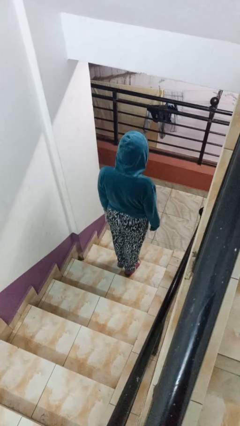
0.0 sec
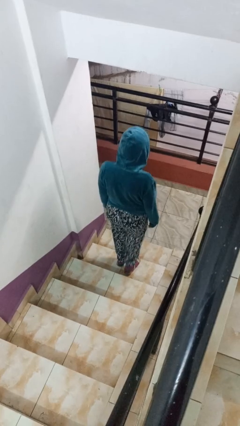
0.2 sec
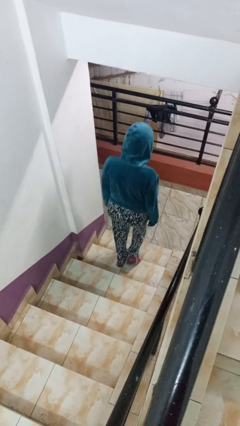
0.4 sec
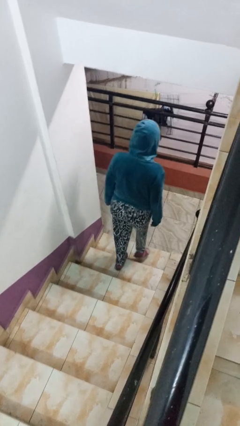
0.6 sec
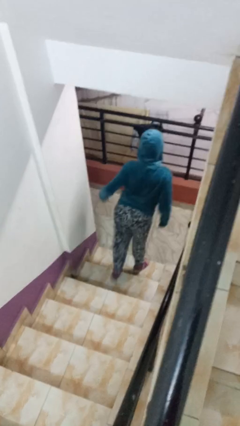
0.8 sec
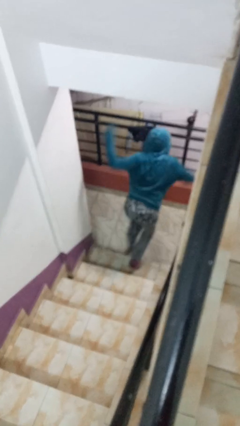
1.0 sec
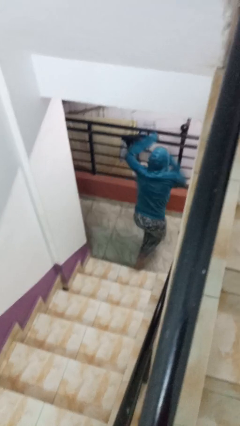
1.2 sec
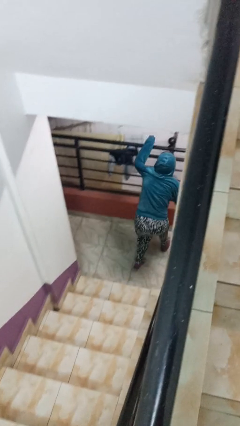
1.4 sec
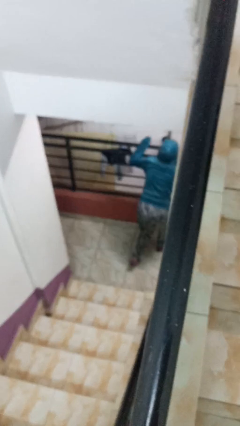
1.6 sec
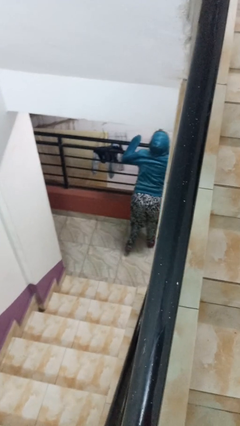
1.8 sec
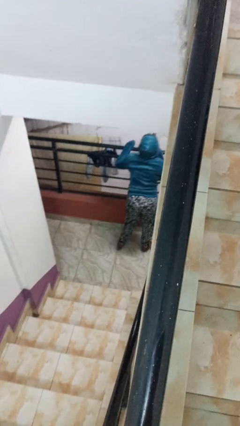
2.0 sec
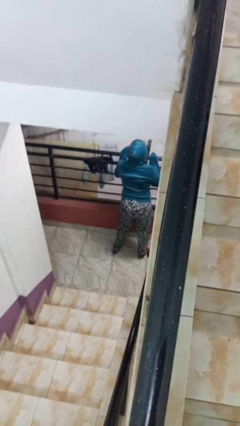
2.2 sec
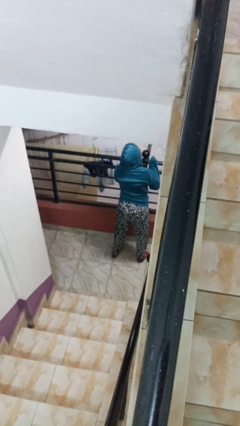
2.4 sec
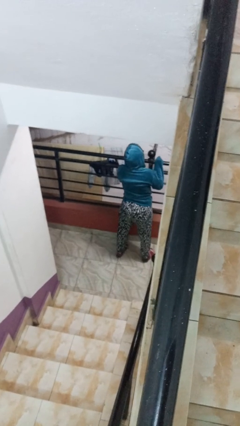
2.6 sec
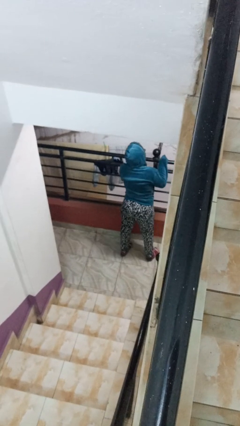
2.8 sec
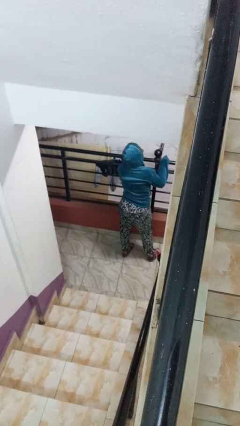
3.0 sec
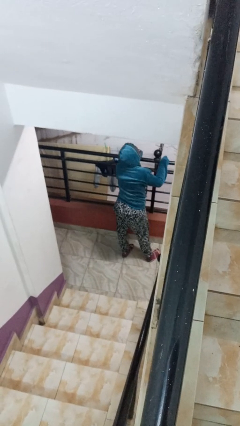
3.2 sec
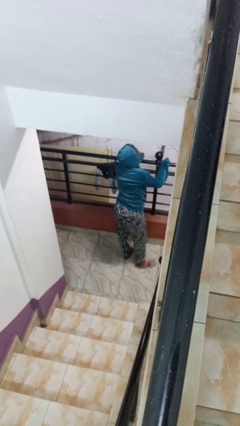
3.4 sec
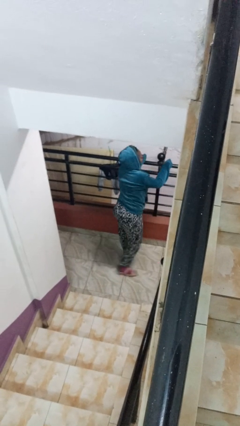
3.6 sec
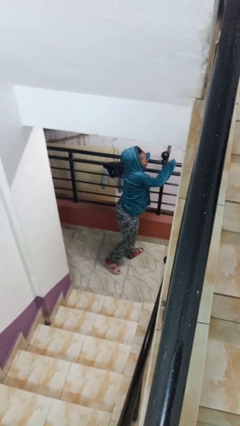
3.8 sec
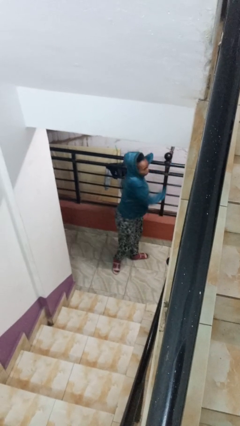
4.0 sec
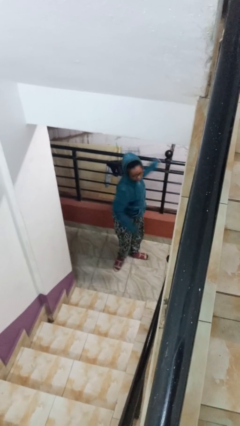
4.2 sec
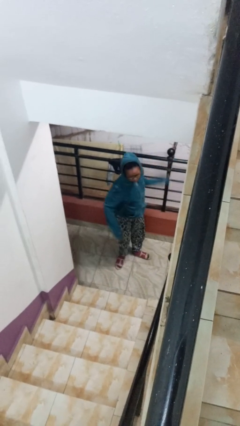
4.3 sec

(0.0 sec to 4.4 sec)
person trips on stair

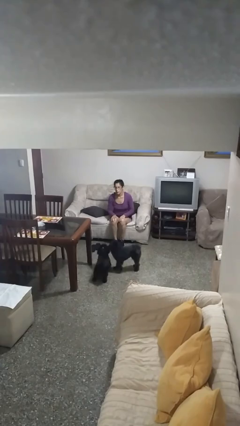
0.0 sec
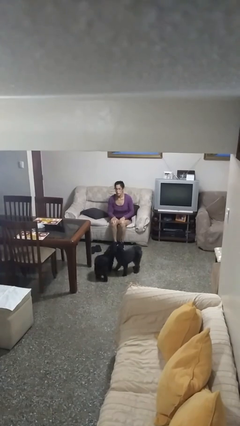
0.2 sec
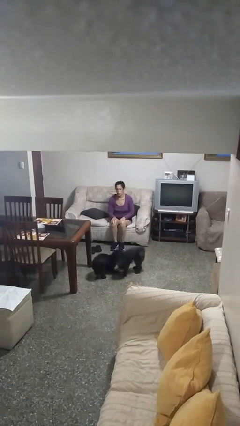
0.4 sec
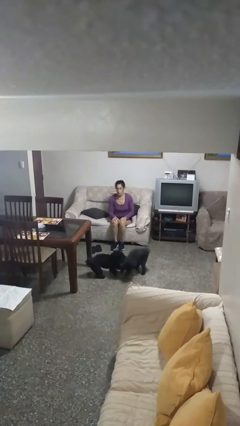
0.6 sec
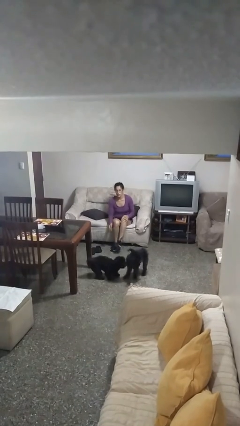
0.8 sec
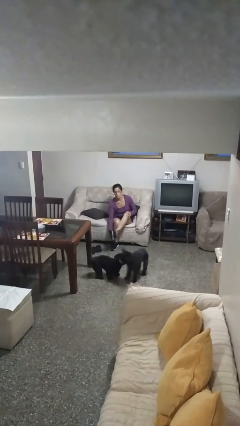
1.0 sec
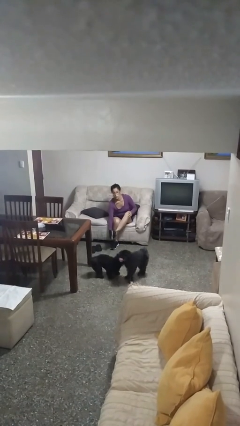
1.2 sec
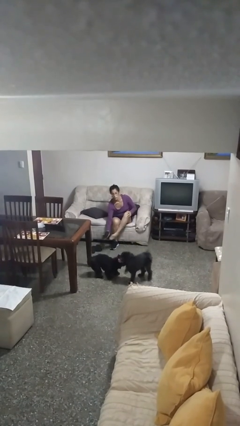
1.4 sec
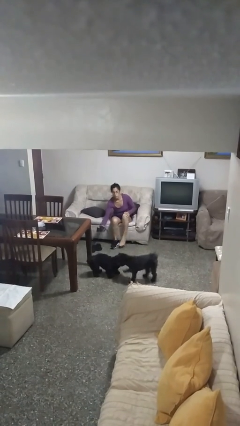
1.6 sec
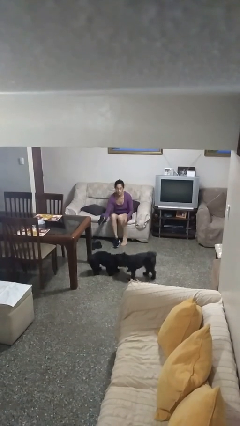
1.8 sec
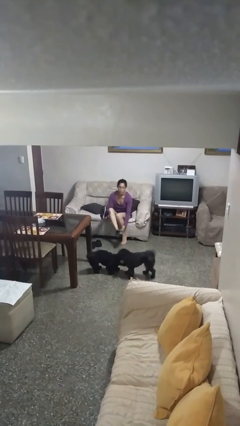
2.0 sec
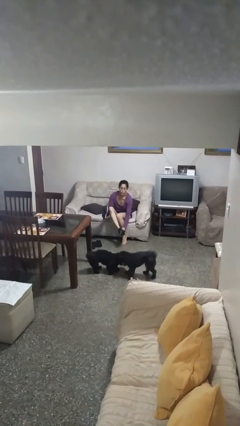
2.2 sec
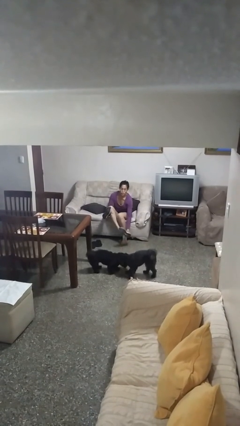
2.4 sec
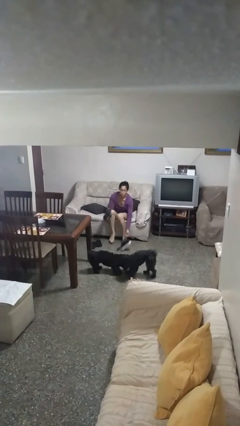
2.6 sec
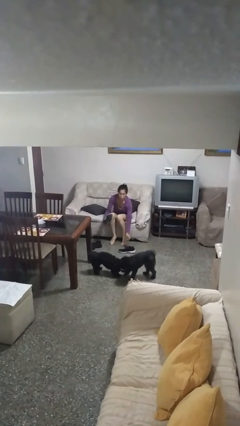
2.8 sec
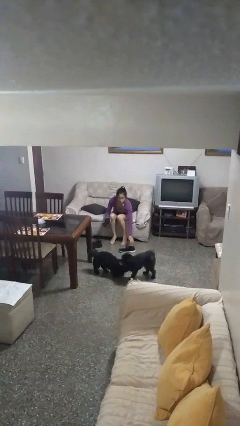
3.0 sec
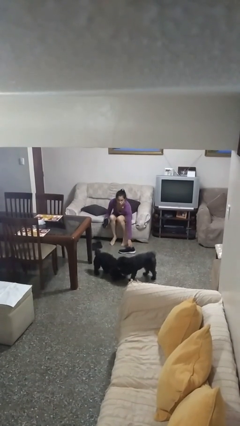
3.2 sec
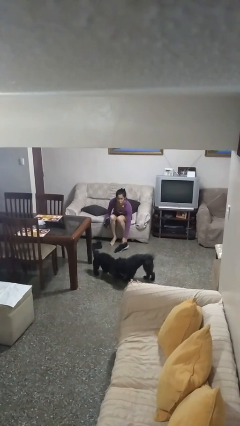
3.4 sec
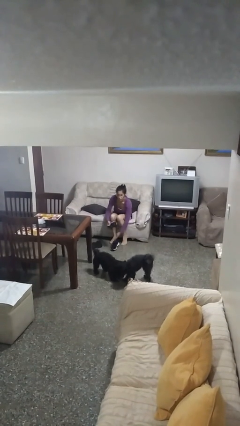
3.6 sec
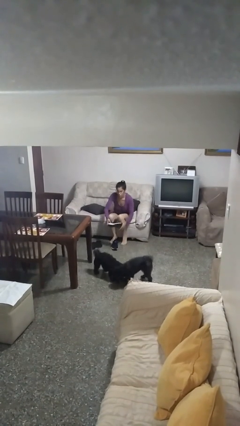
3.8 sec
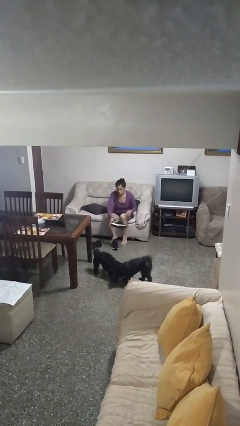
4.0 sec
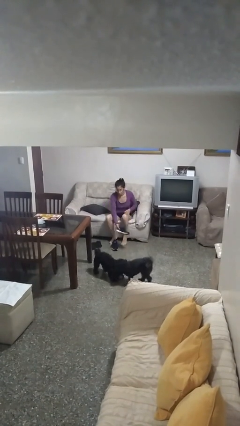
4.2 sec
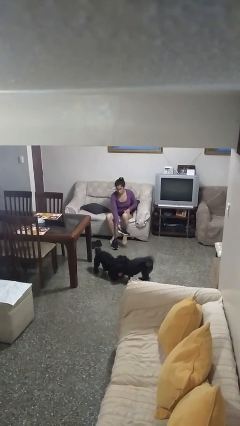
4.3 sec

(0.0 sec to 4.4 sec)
person takes off shoes

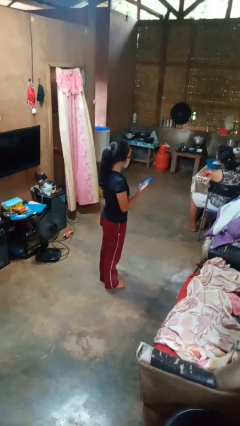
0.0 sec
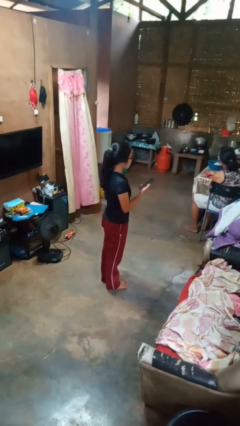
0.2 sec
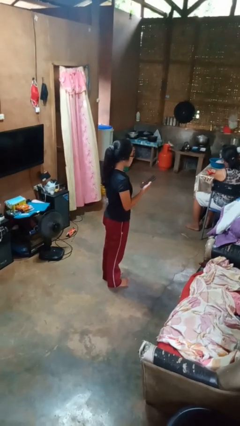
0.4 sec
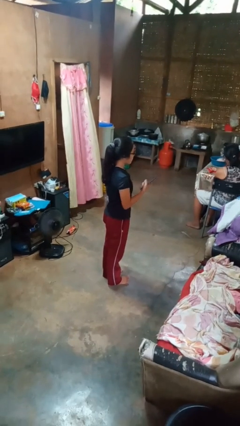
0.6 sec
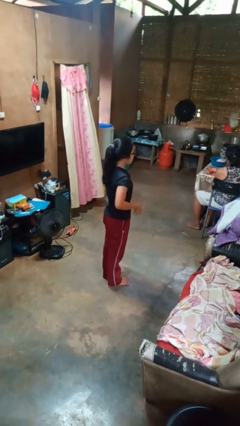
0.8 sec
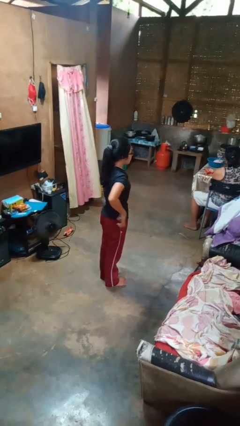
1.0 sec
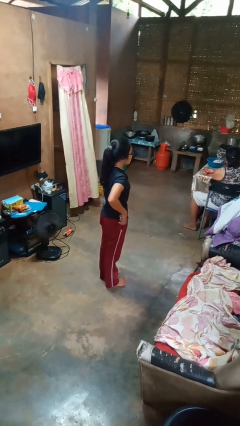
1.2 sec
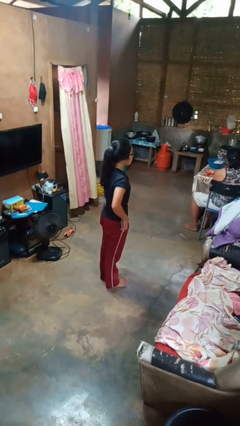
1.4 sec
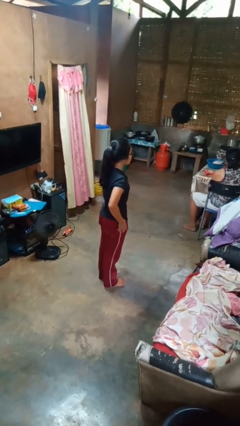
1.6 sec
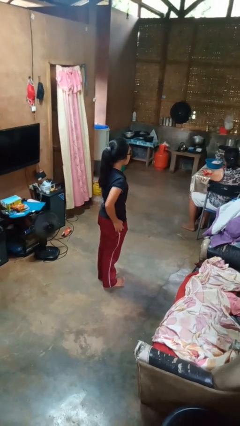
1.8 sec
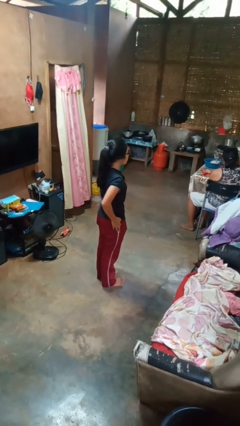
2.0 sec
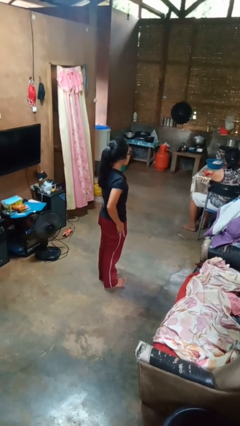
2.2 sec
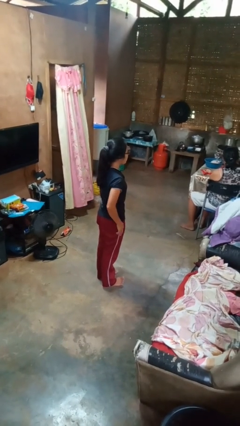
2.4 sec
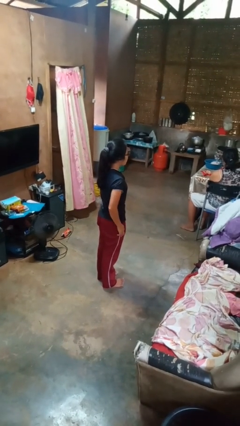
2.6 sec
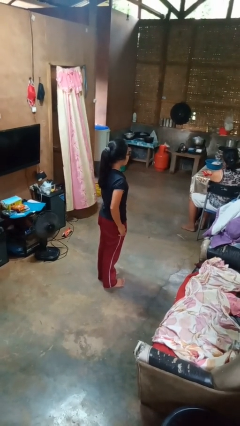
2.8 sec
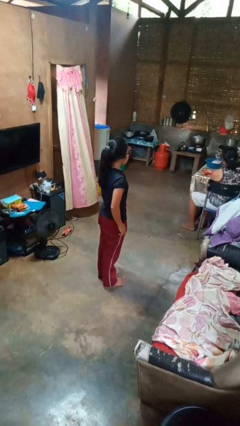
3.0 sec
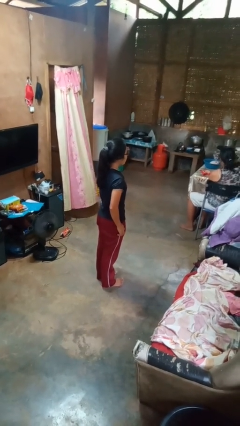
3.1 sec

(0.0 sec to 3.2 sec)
person puts phone into pocket

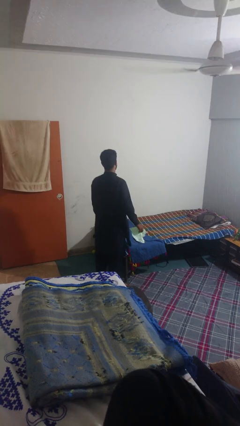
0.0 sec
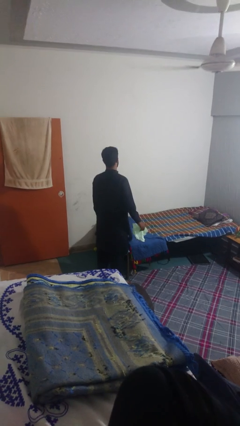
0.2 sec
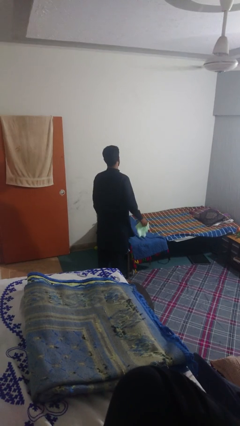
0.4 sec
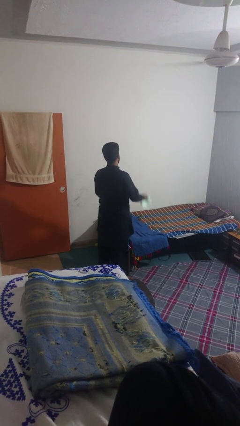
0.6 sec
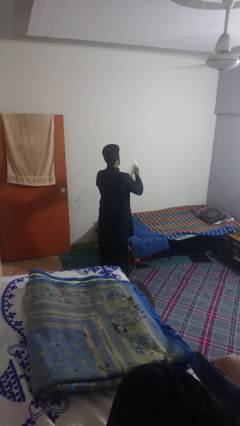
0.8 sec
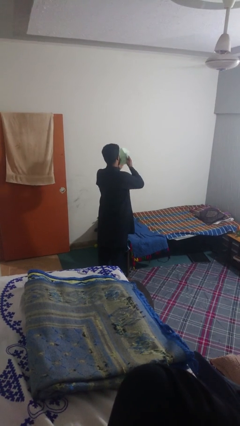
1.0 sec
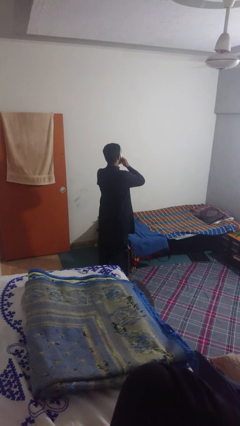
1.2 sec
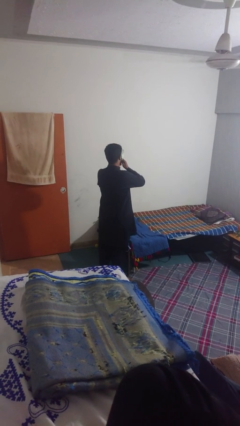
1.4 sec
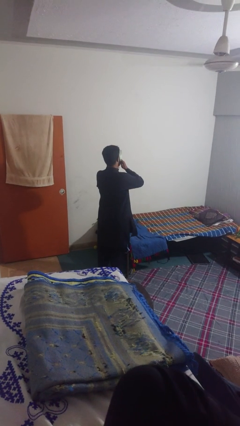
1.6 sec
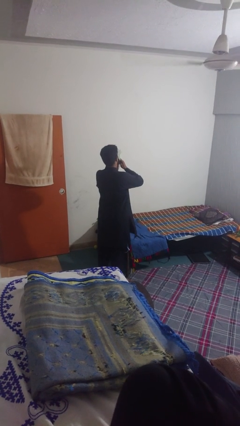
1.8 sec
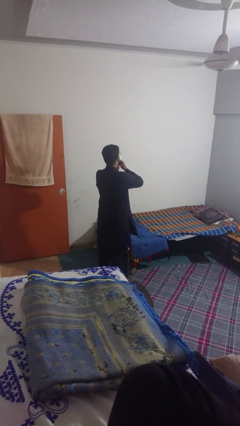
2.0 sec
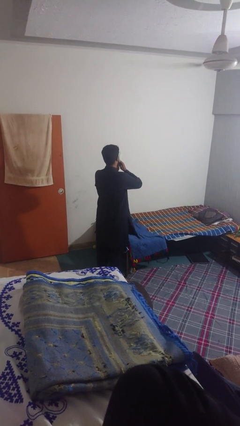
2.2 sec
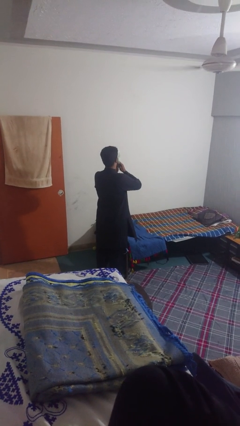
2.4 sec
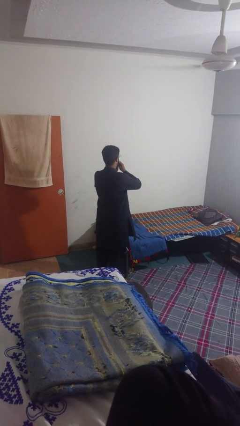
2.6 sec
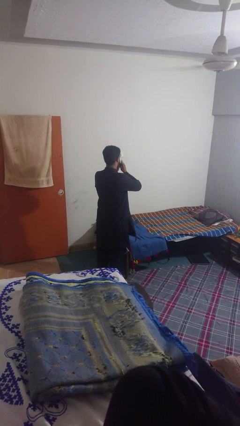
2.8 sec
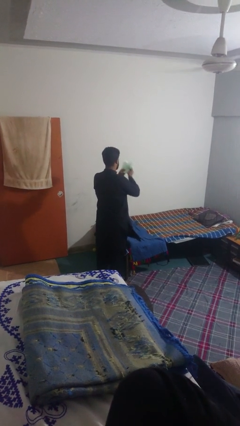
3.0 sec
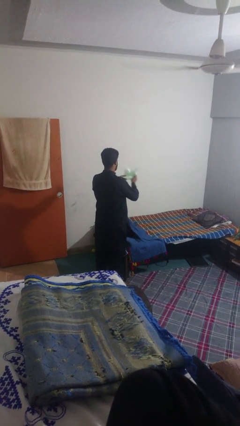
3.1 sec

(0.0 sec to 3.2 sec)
person blows nose

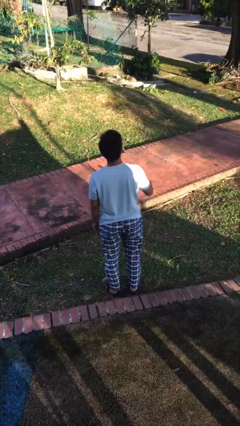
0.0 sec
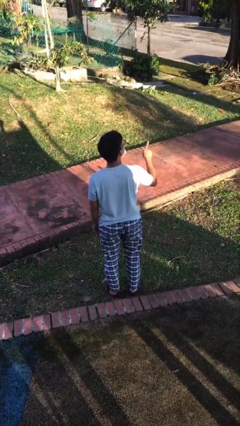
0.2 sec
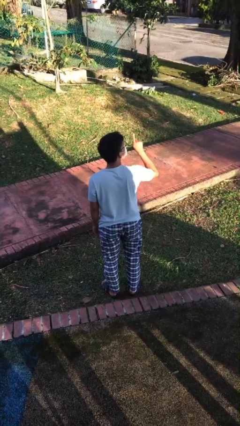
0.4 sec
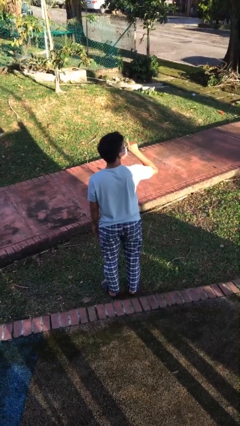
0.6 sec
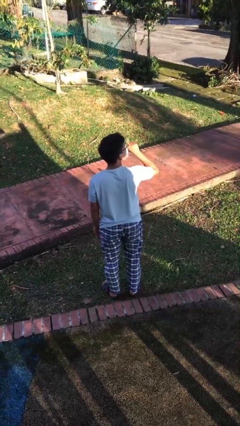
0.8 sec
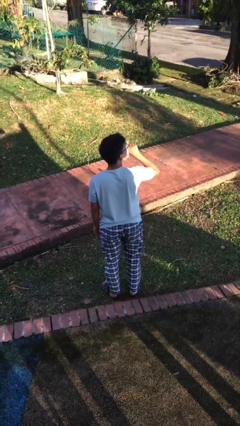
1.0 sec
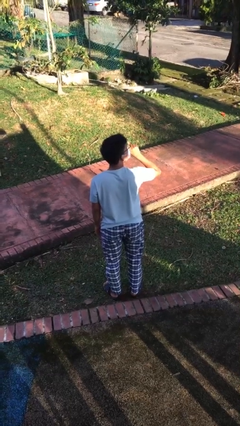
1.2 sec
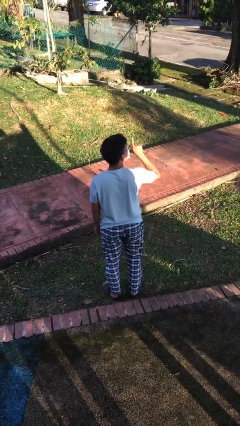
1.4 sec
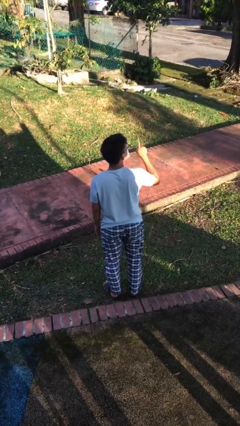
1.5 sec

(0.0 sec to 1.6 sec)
person gestures be quiet

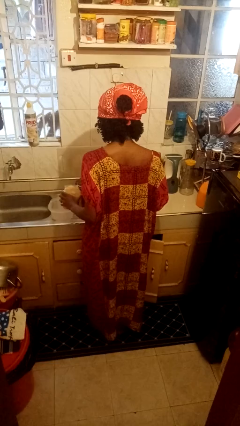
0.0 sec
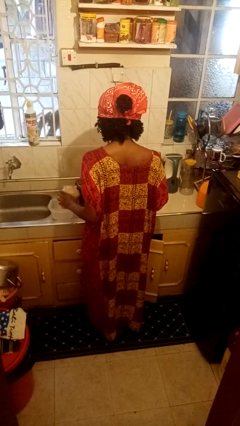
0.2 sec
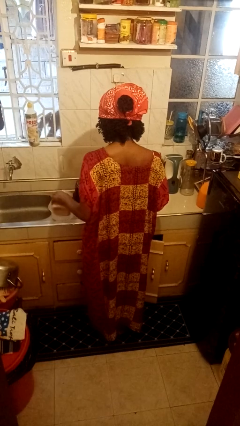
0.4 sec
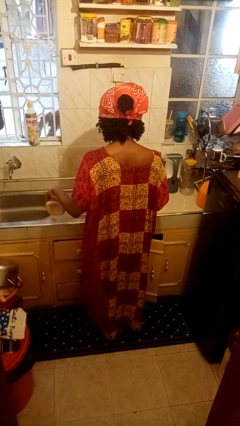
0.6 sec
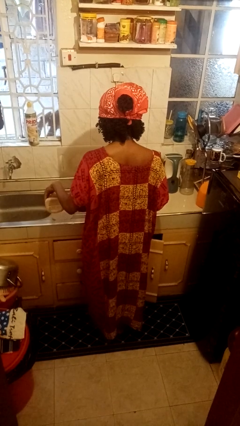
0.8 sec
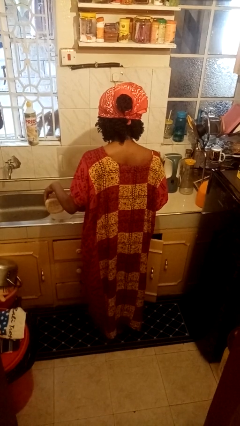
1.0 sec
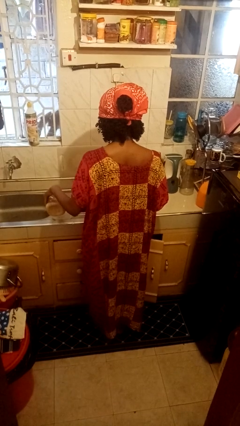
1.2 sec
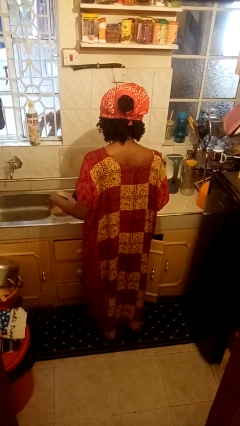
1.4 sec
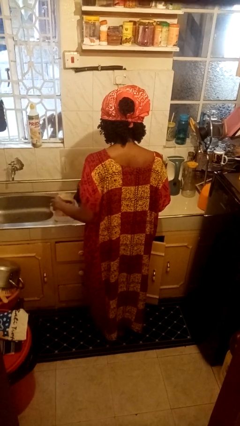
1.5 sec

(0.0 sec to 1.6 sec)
person pours into bowl
